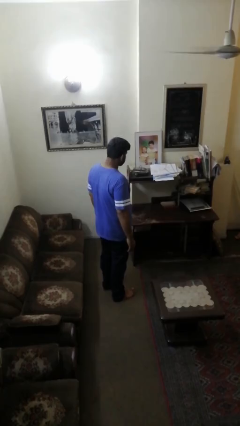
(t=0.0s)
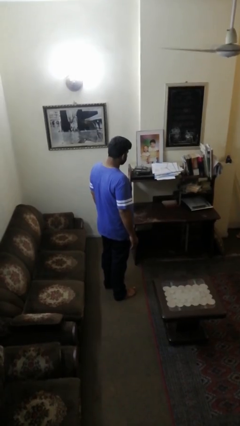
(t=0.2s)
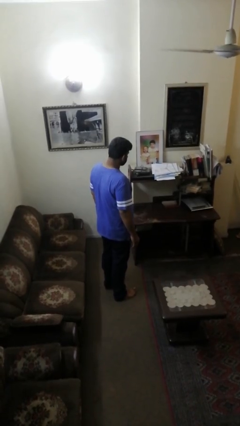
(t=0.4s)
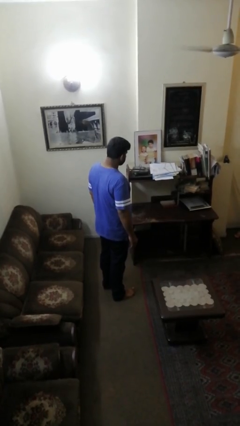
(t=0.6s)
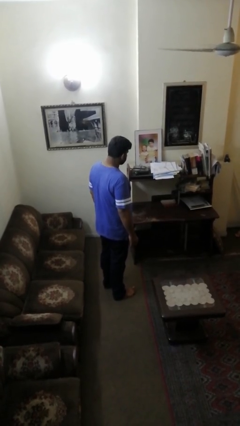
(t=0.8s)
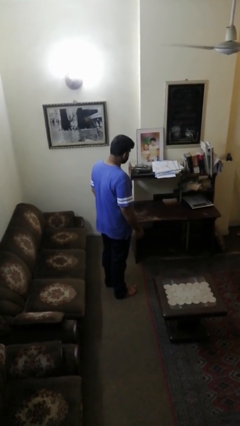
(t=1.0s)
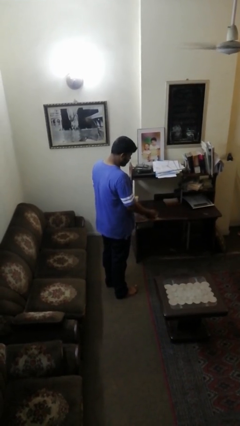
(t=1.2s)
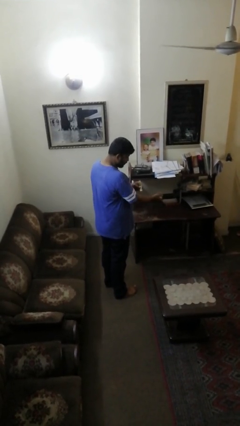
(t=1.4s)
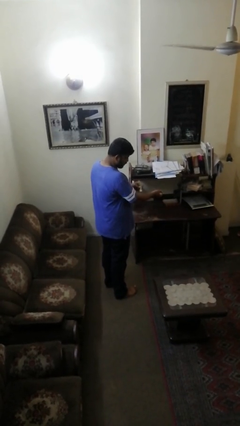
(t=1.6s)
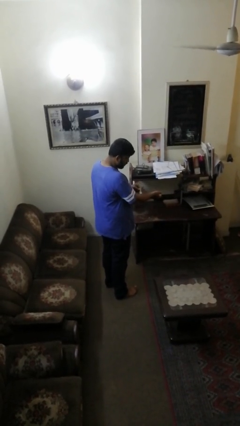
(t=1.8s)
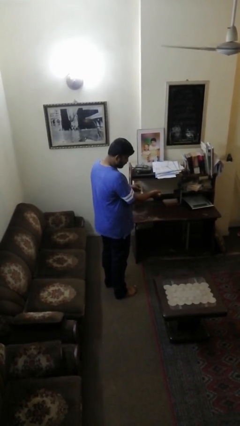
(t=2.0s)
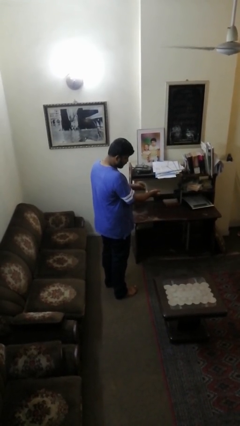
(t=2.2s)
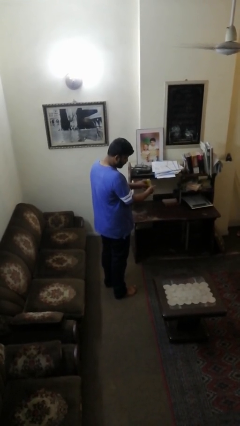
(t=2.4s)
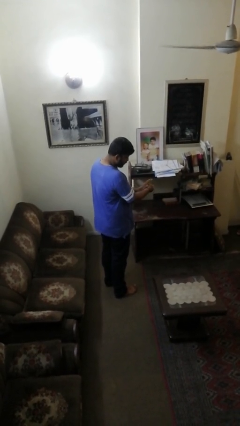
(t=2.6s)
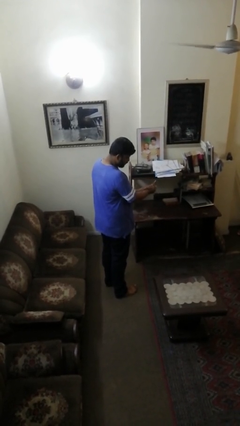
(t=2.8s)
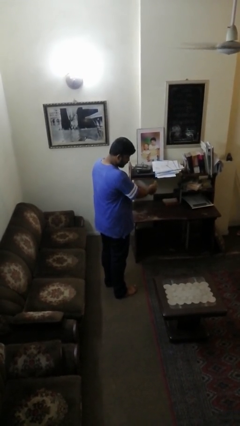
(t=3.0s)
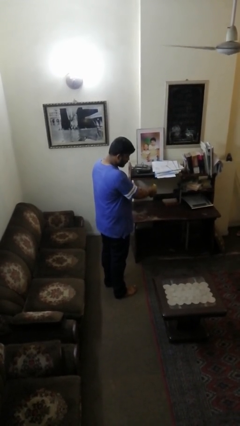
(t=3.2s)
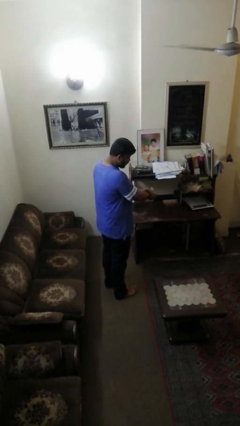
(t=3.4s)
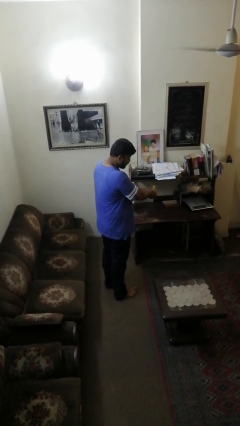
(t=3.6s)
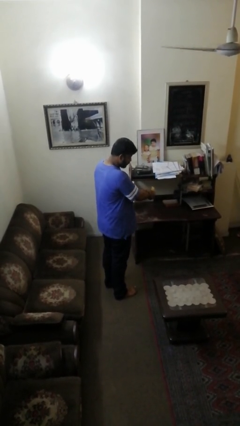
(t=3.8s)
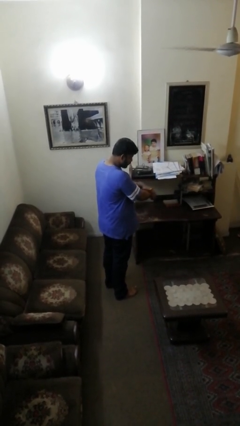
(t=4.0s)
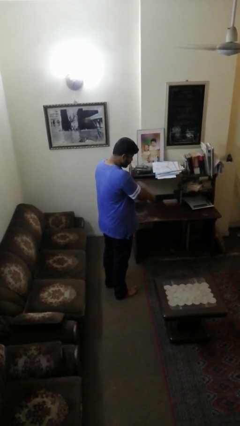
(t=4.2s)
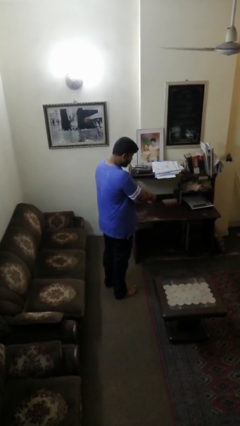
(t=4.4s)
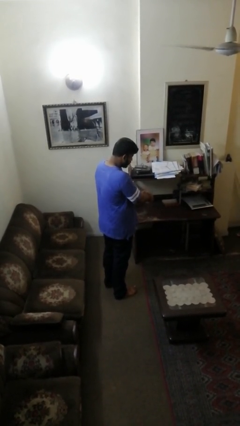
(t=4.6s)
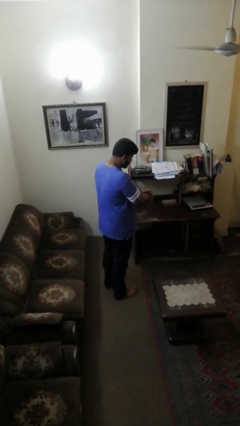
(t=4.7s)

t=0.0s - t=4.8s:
person applies sunscreen

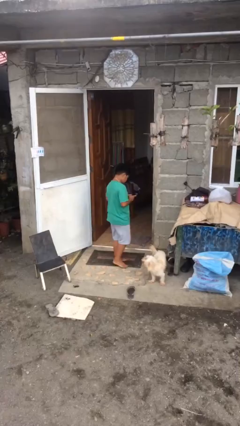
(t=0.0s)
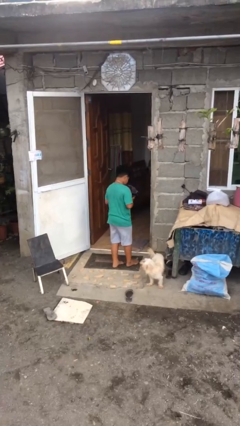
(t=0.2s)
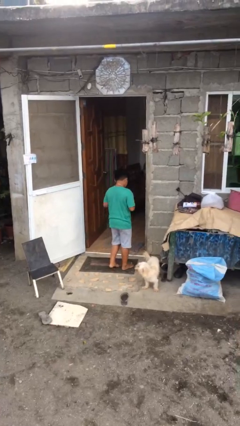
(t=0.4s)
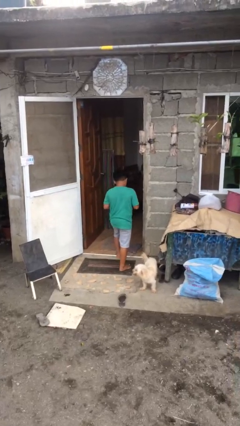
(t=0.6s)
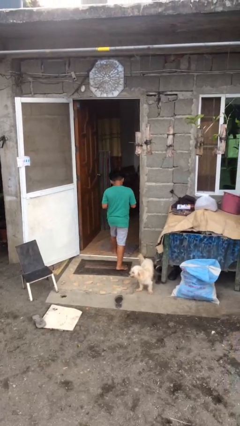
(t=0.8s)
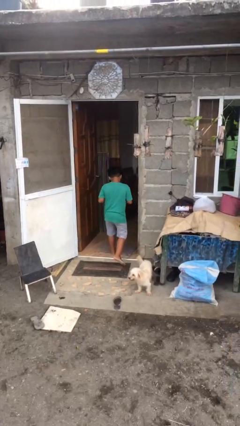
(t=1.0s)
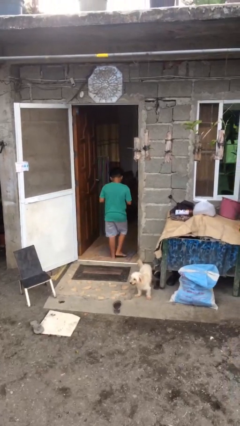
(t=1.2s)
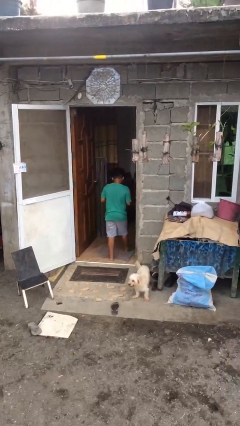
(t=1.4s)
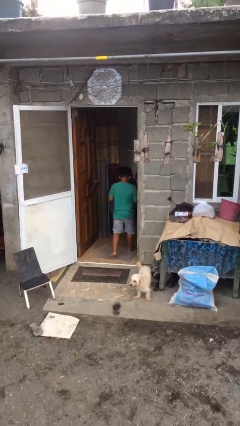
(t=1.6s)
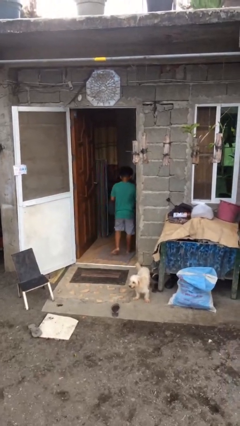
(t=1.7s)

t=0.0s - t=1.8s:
person exits scene through structure

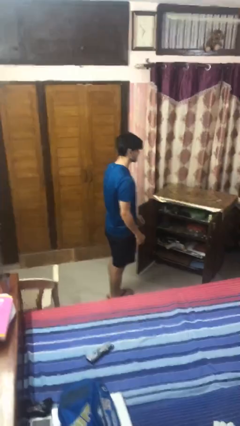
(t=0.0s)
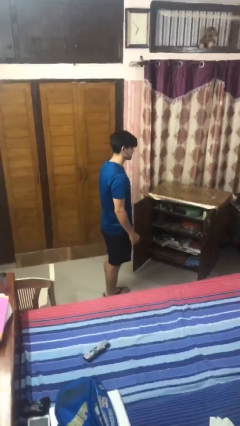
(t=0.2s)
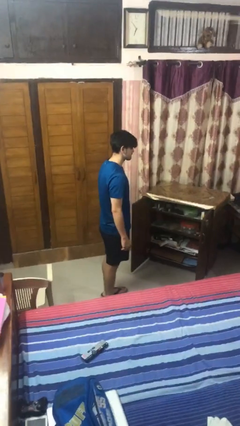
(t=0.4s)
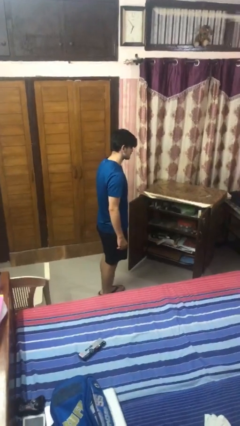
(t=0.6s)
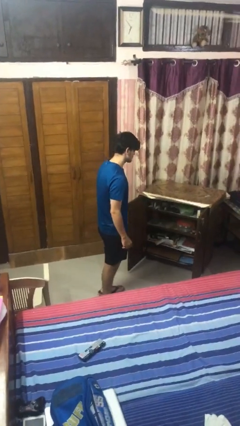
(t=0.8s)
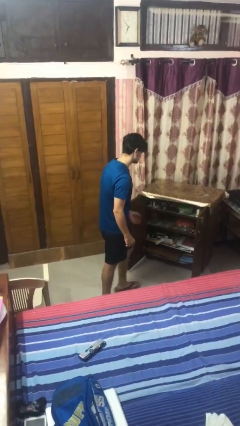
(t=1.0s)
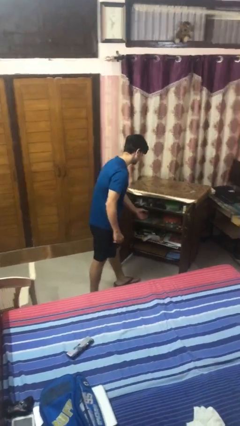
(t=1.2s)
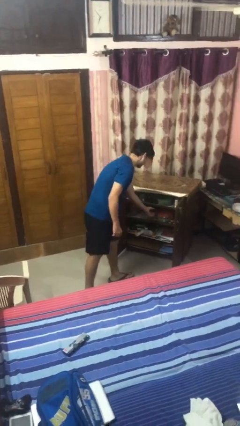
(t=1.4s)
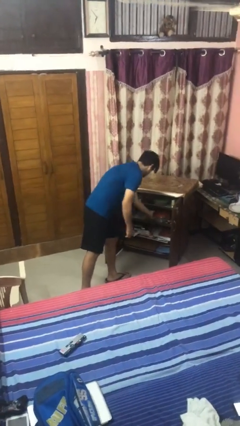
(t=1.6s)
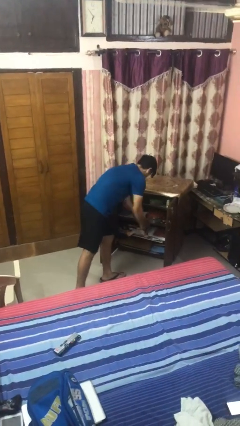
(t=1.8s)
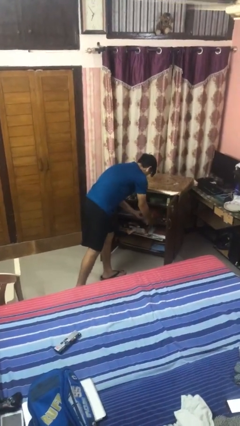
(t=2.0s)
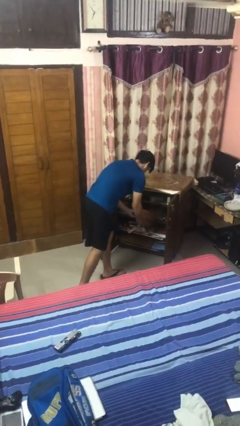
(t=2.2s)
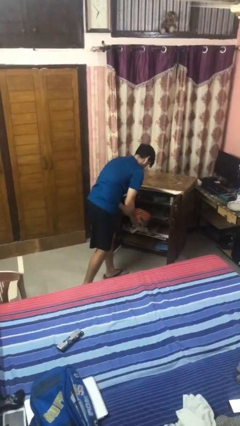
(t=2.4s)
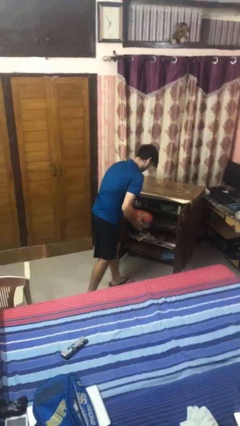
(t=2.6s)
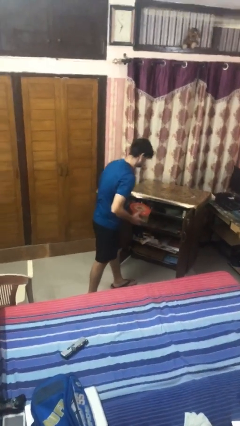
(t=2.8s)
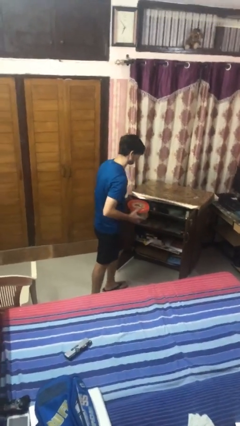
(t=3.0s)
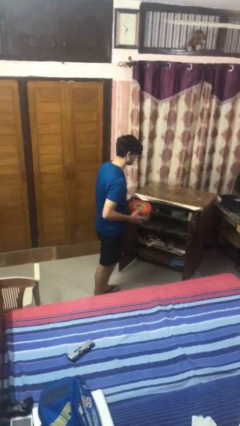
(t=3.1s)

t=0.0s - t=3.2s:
person picks up object from cabinet

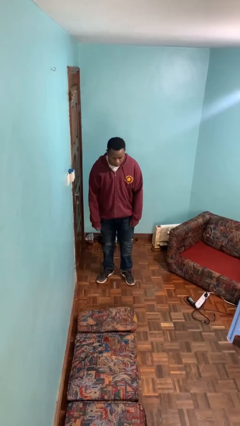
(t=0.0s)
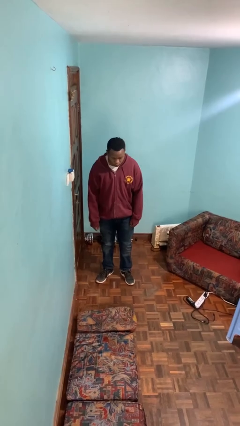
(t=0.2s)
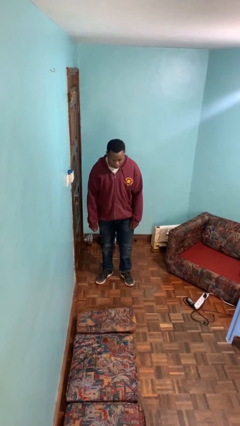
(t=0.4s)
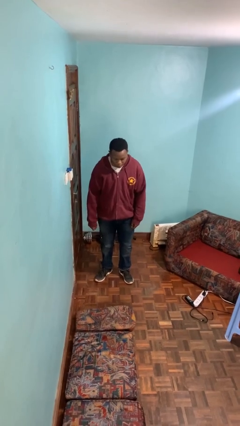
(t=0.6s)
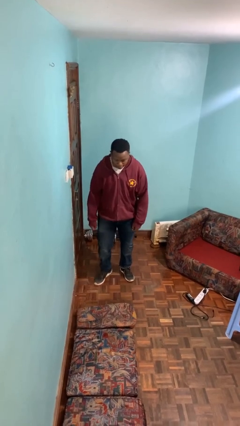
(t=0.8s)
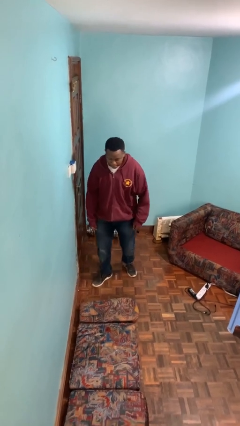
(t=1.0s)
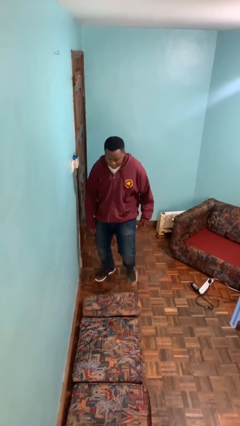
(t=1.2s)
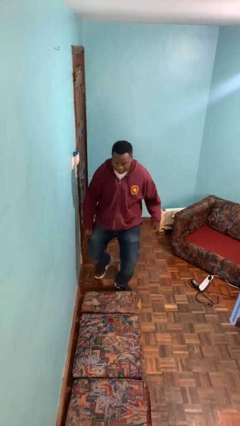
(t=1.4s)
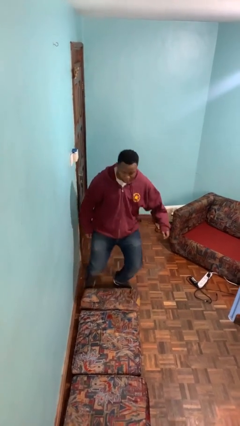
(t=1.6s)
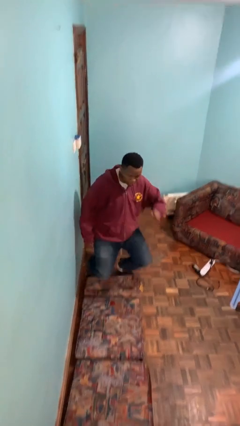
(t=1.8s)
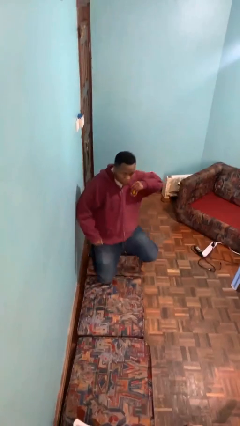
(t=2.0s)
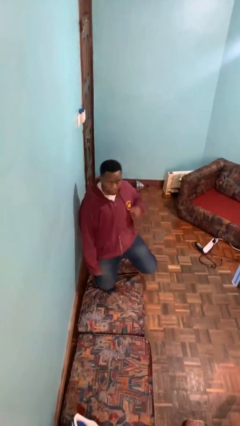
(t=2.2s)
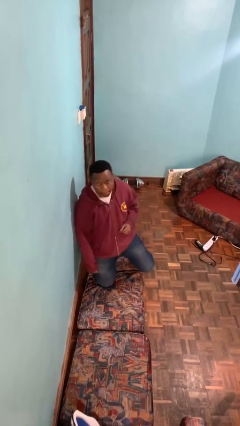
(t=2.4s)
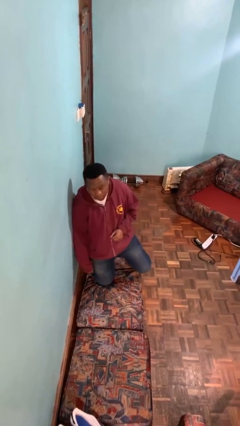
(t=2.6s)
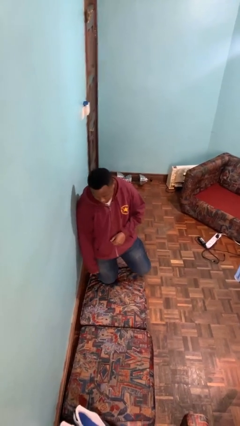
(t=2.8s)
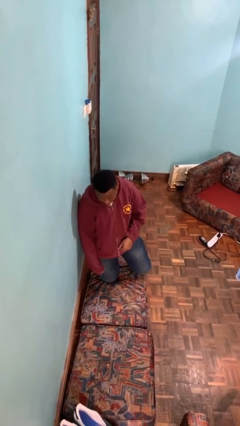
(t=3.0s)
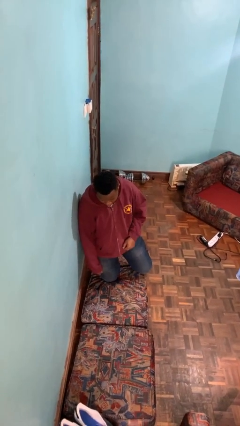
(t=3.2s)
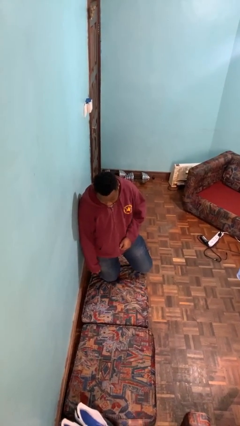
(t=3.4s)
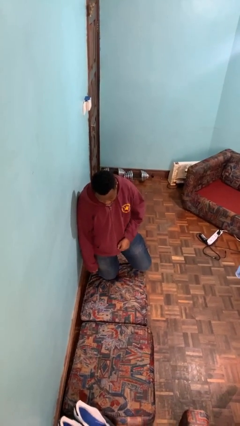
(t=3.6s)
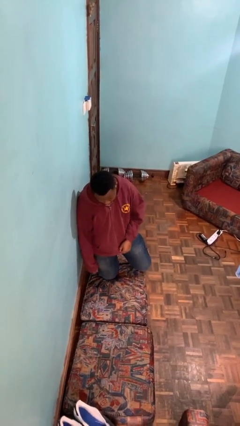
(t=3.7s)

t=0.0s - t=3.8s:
person trips on object on floor

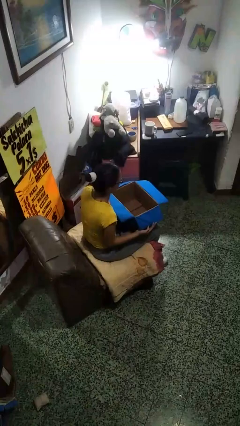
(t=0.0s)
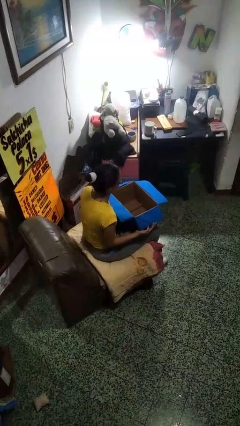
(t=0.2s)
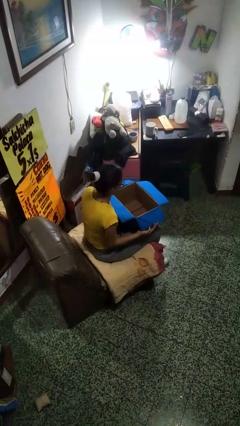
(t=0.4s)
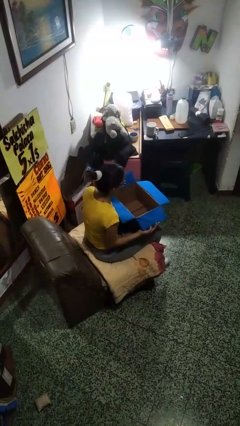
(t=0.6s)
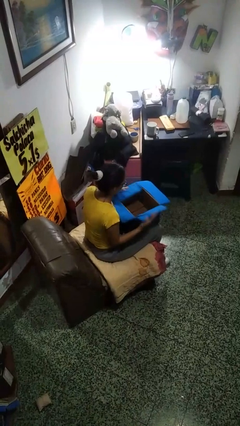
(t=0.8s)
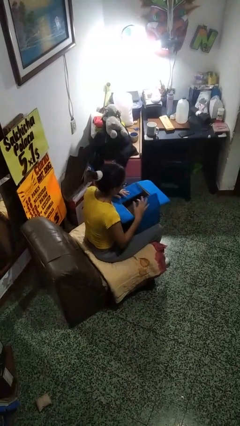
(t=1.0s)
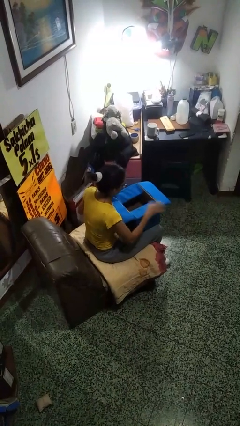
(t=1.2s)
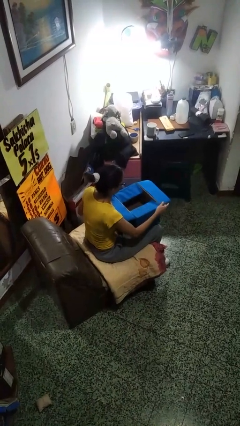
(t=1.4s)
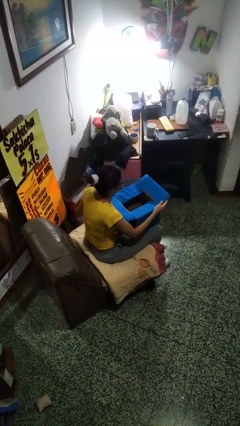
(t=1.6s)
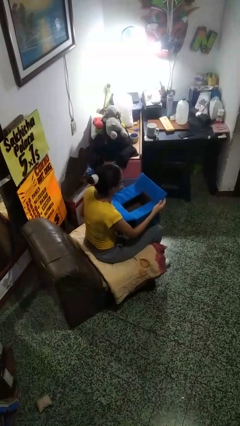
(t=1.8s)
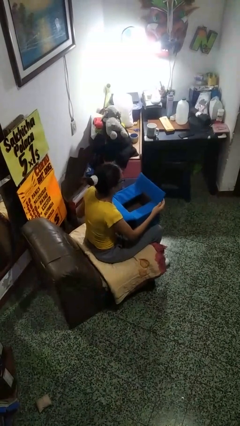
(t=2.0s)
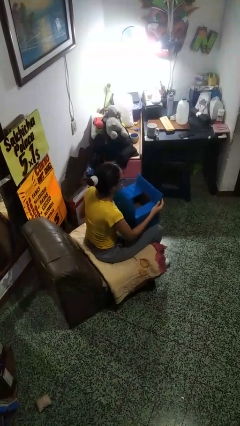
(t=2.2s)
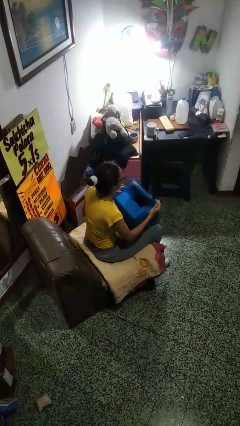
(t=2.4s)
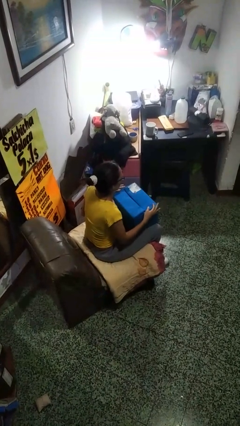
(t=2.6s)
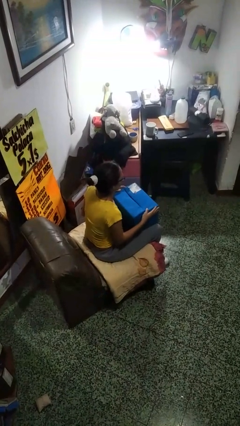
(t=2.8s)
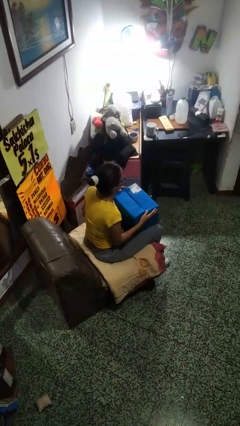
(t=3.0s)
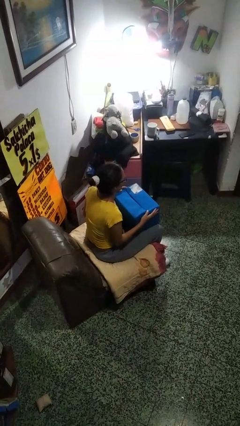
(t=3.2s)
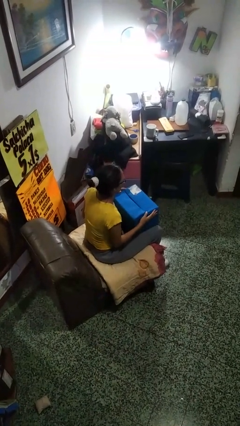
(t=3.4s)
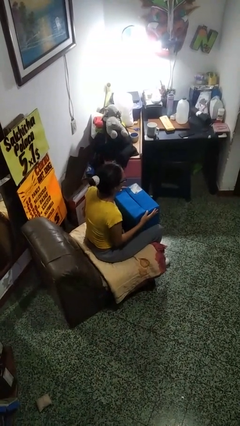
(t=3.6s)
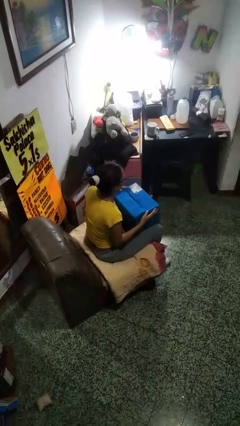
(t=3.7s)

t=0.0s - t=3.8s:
person closes box
